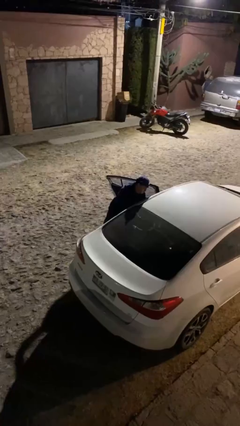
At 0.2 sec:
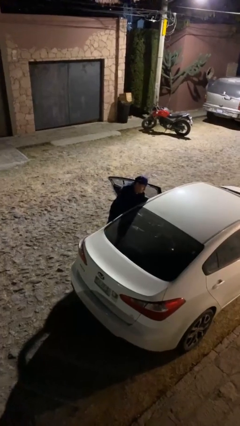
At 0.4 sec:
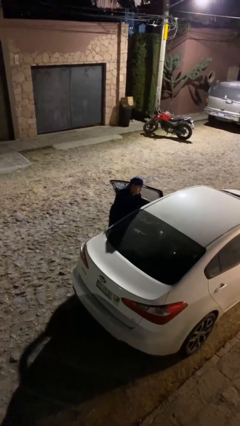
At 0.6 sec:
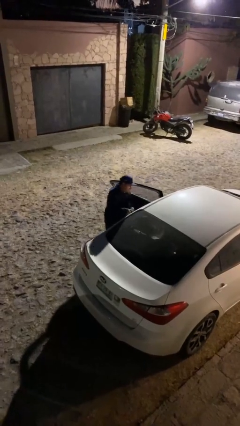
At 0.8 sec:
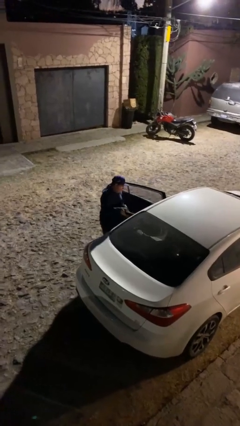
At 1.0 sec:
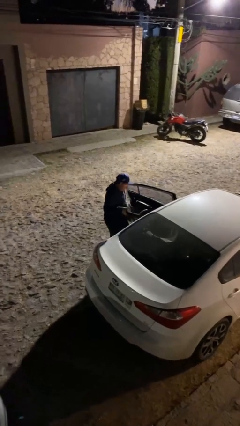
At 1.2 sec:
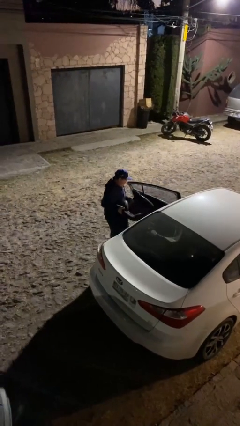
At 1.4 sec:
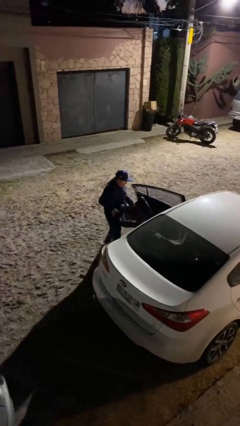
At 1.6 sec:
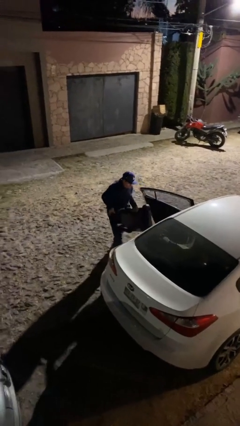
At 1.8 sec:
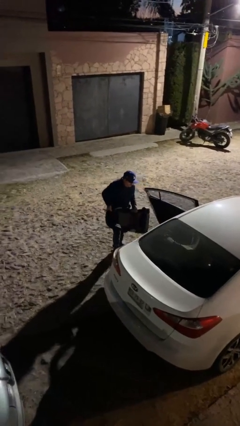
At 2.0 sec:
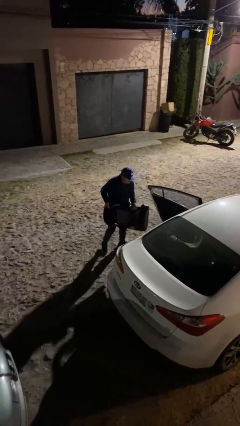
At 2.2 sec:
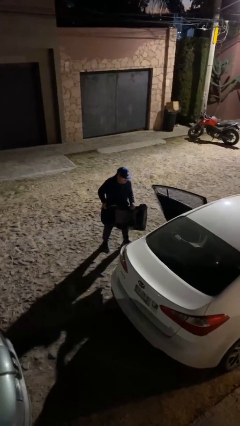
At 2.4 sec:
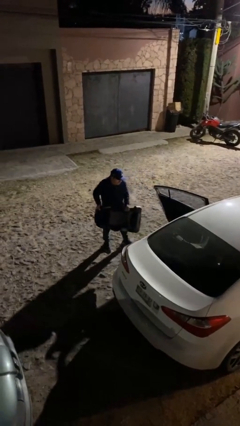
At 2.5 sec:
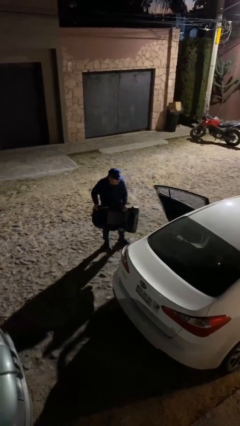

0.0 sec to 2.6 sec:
person unloads car

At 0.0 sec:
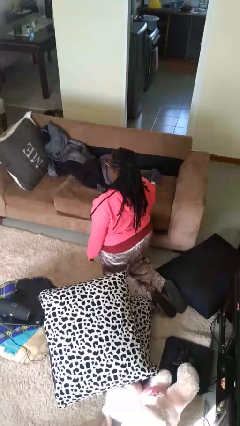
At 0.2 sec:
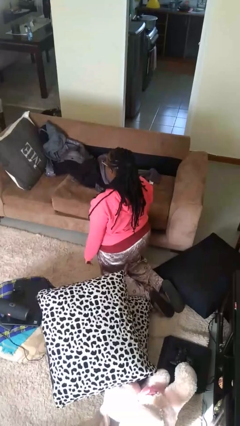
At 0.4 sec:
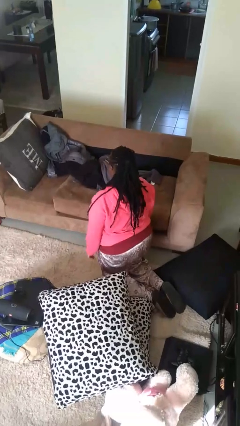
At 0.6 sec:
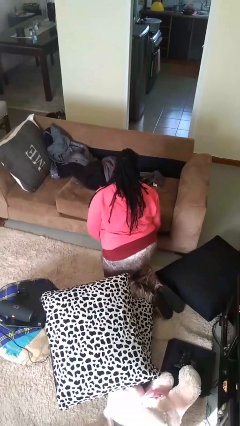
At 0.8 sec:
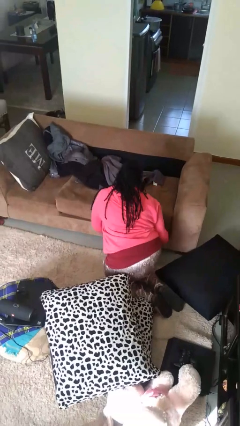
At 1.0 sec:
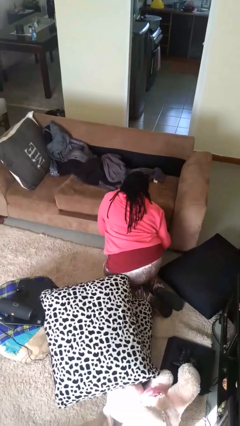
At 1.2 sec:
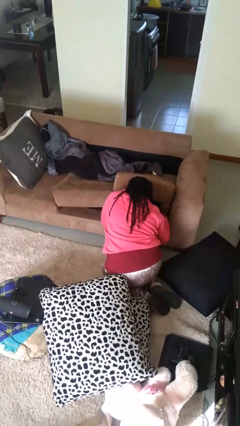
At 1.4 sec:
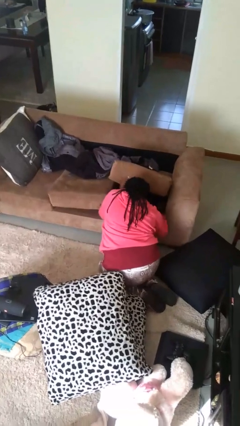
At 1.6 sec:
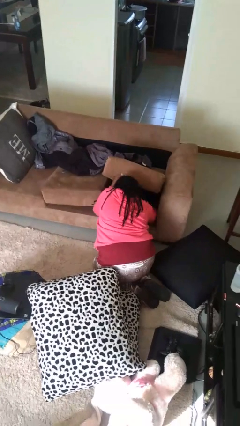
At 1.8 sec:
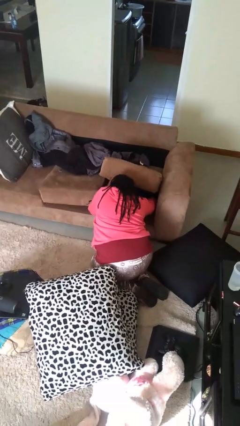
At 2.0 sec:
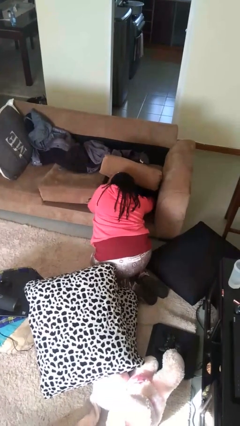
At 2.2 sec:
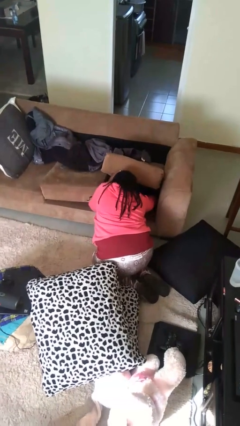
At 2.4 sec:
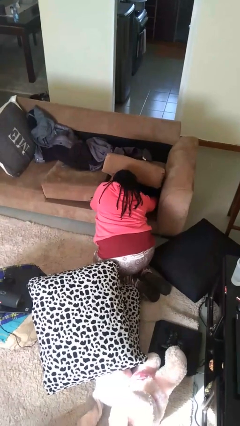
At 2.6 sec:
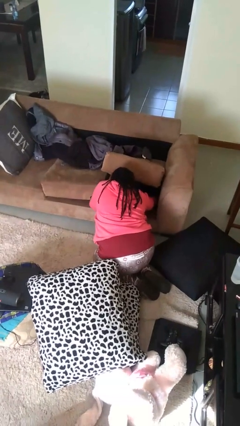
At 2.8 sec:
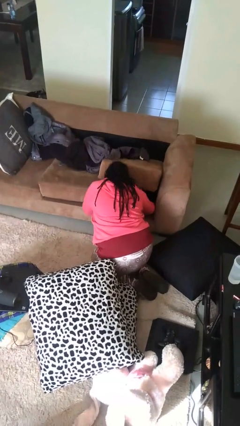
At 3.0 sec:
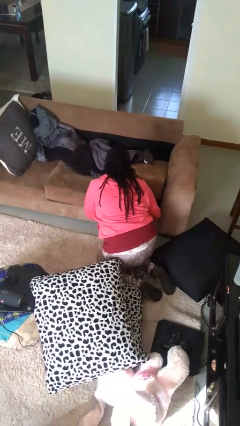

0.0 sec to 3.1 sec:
person searches under couch

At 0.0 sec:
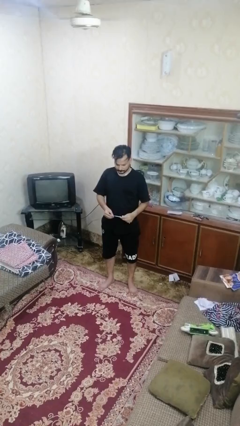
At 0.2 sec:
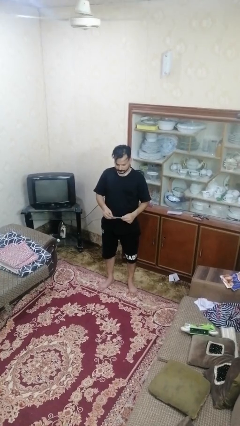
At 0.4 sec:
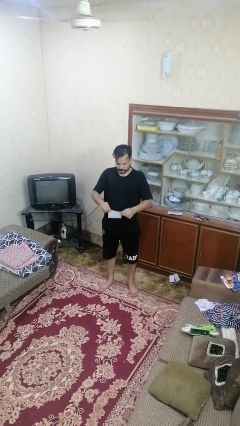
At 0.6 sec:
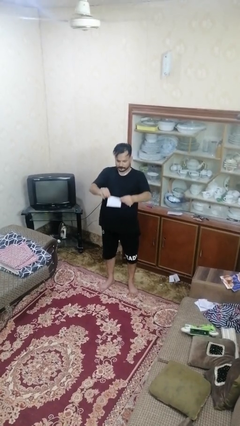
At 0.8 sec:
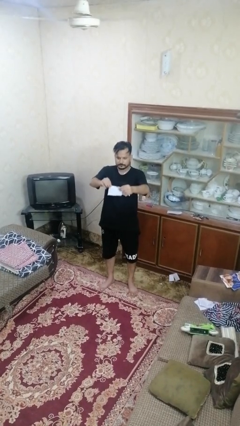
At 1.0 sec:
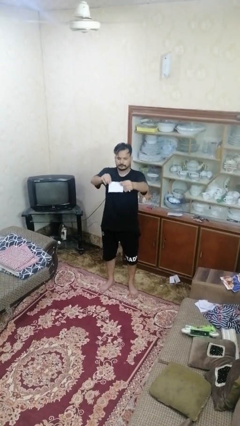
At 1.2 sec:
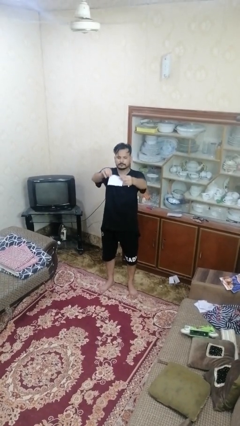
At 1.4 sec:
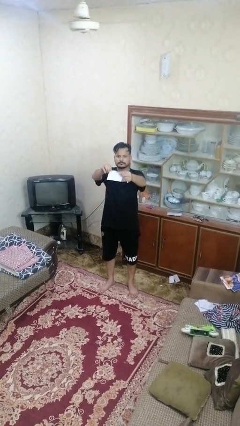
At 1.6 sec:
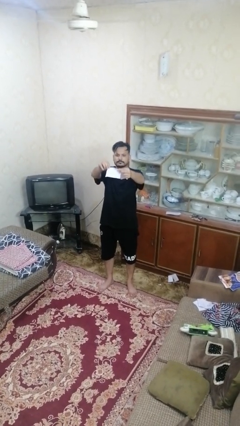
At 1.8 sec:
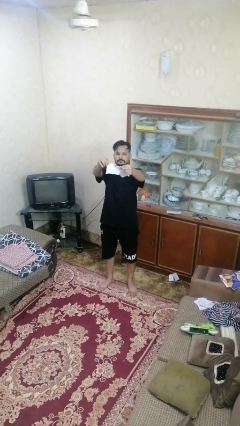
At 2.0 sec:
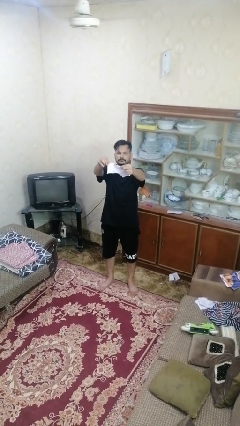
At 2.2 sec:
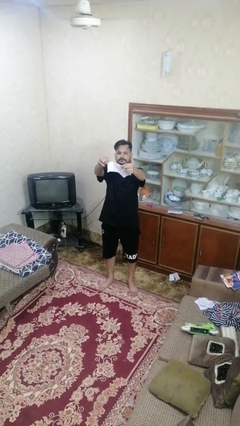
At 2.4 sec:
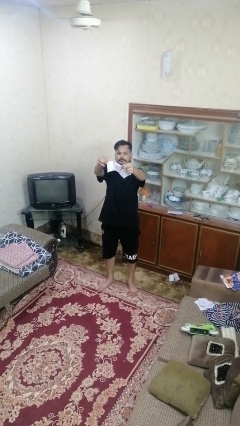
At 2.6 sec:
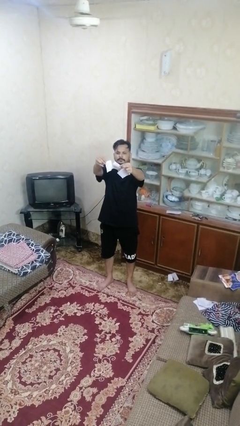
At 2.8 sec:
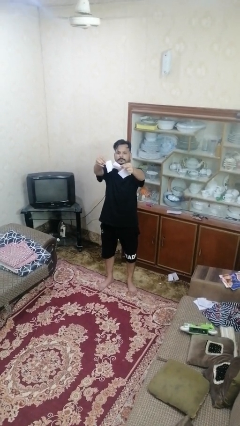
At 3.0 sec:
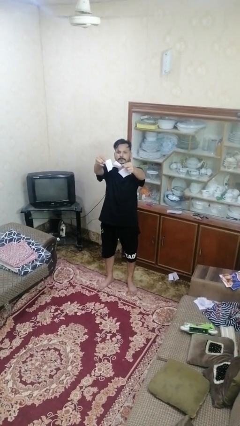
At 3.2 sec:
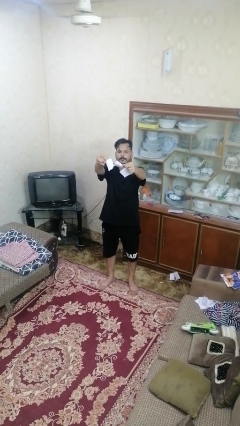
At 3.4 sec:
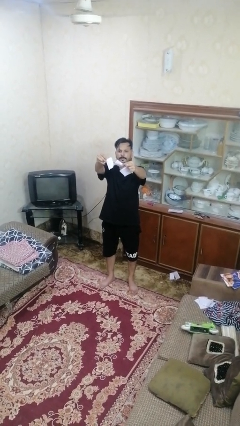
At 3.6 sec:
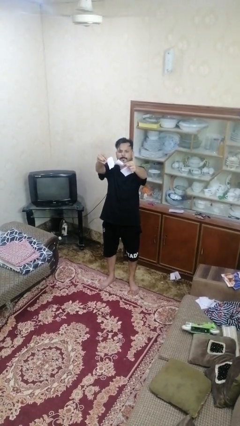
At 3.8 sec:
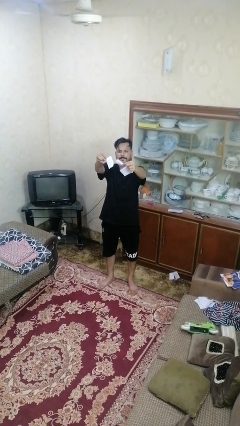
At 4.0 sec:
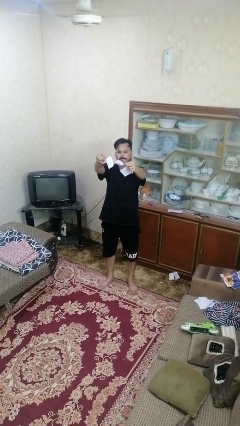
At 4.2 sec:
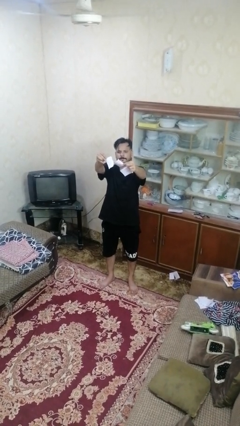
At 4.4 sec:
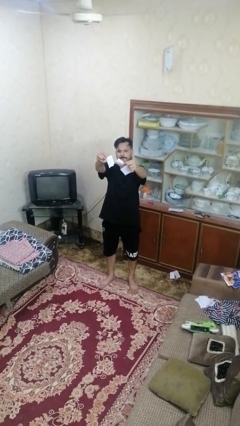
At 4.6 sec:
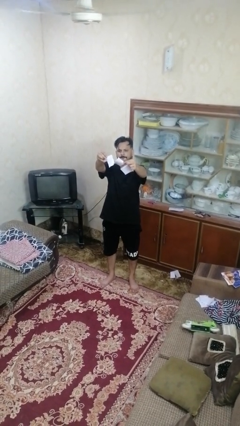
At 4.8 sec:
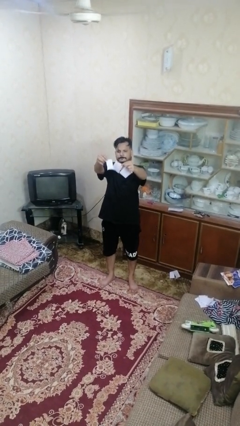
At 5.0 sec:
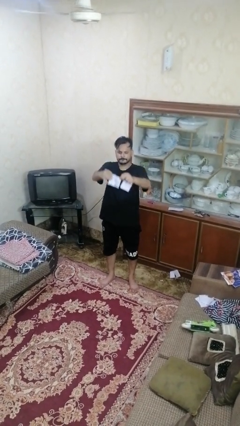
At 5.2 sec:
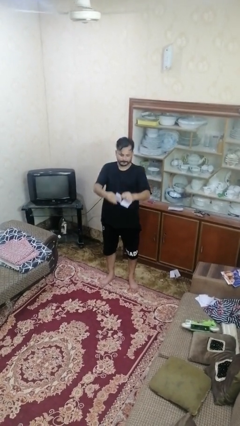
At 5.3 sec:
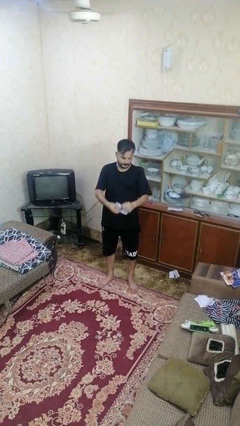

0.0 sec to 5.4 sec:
person tears paper

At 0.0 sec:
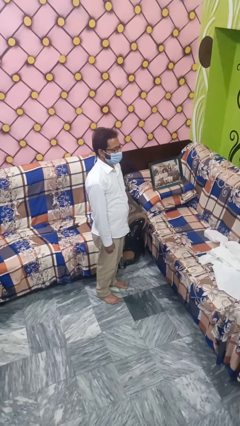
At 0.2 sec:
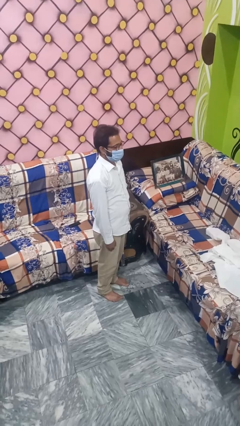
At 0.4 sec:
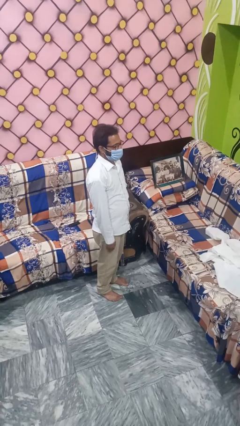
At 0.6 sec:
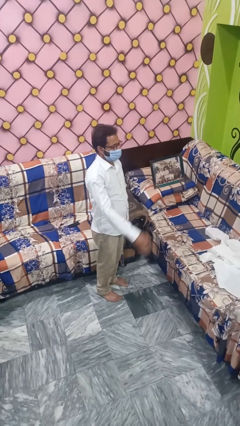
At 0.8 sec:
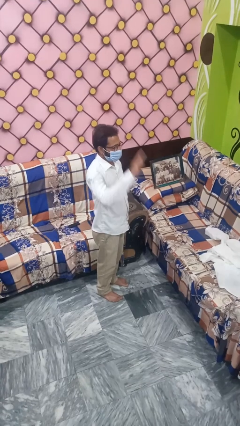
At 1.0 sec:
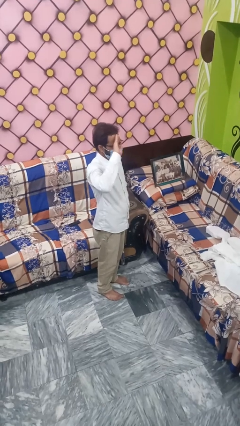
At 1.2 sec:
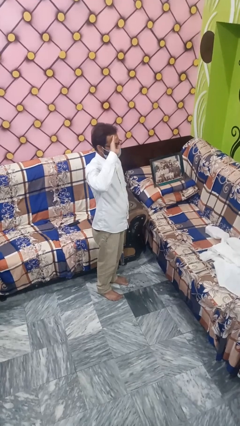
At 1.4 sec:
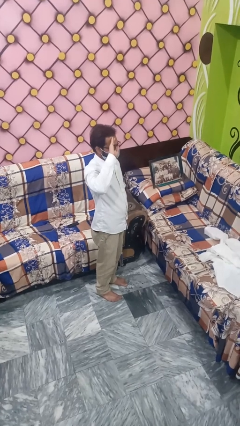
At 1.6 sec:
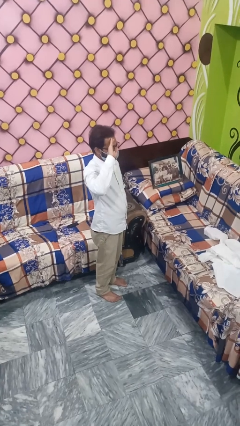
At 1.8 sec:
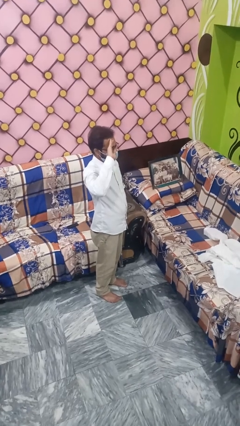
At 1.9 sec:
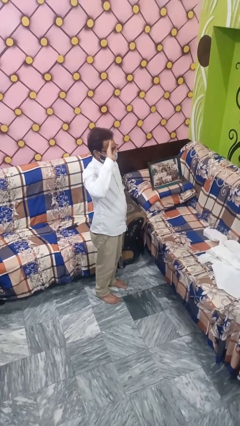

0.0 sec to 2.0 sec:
person salutes

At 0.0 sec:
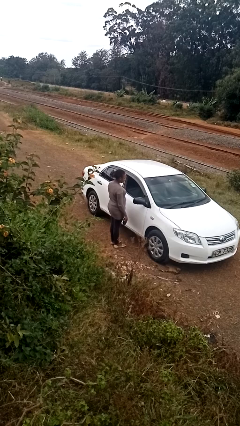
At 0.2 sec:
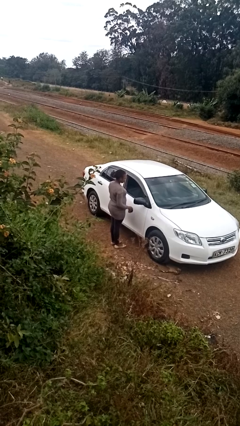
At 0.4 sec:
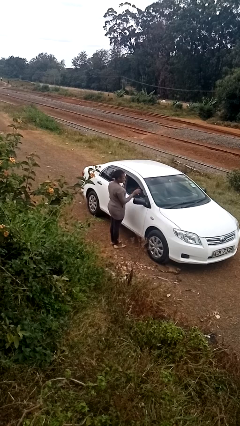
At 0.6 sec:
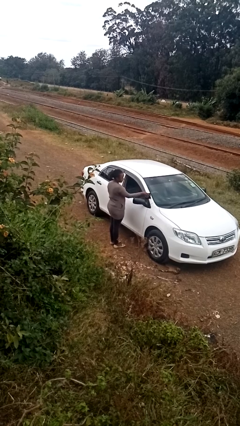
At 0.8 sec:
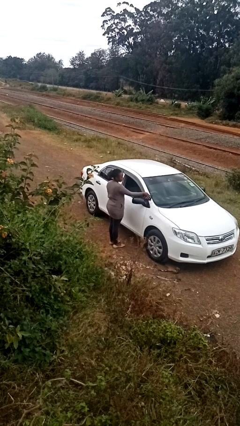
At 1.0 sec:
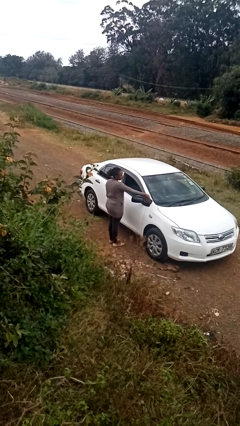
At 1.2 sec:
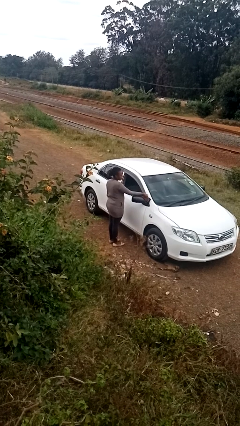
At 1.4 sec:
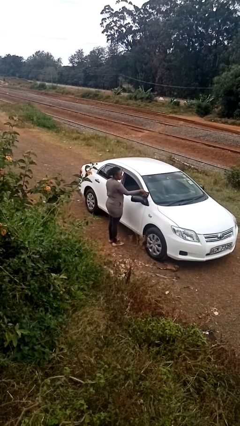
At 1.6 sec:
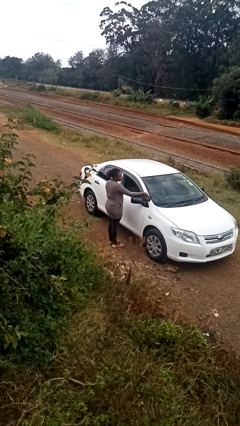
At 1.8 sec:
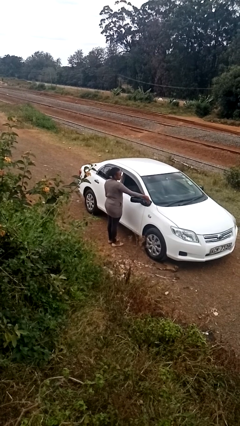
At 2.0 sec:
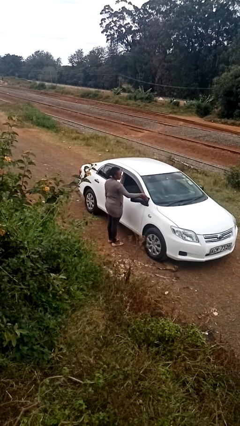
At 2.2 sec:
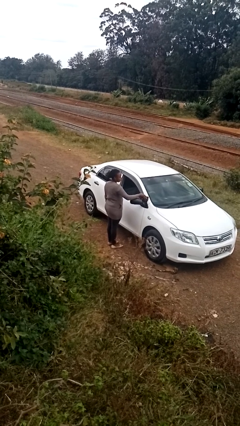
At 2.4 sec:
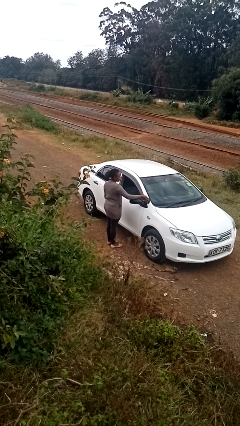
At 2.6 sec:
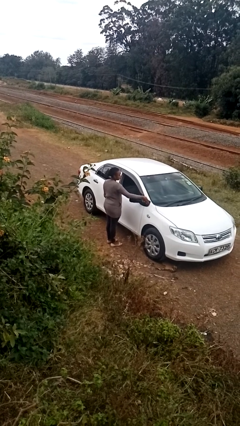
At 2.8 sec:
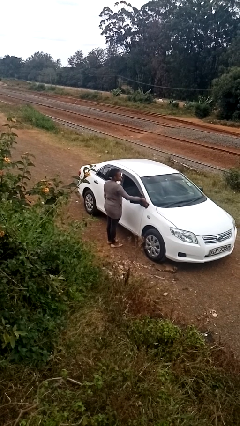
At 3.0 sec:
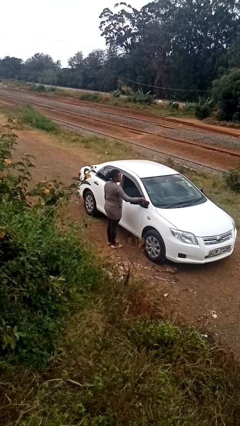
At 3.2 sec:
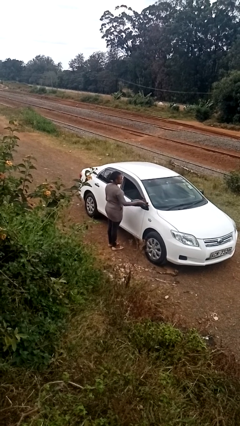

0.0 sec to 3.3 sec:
person polishes car with rag

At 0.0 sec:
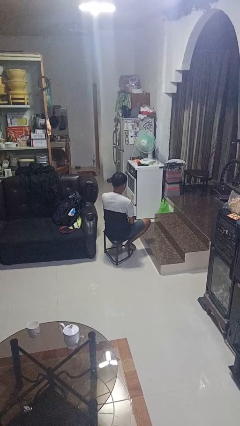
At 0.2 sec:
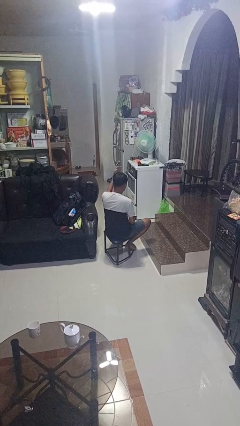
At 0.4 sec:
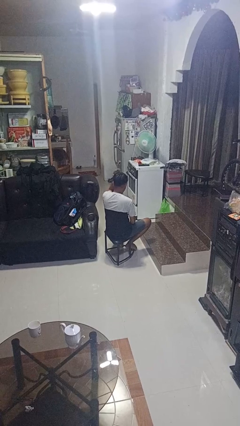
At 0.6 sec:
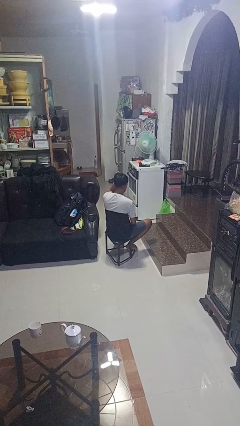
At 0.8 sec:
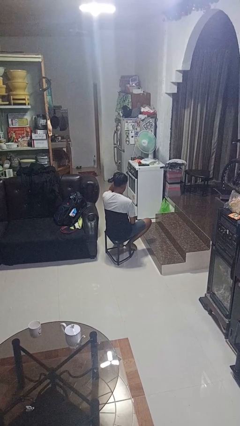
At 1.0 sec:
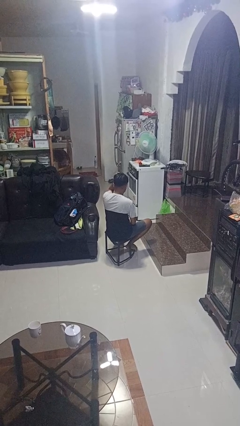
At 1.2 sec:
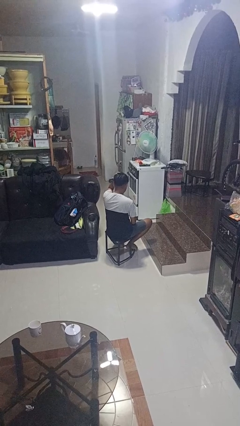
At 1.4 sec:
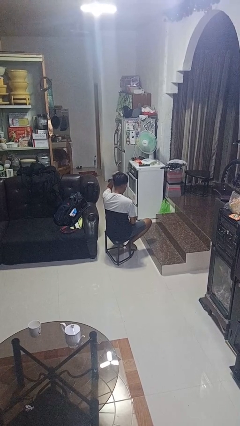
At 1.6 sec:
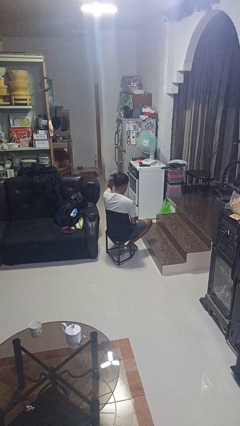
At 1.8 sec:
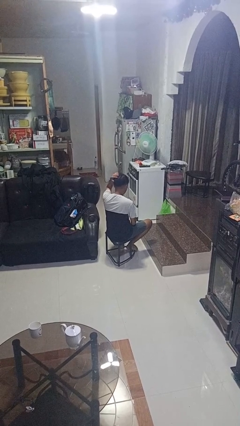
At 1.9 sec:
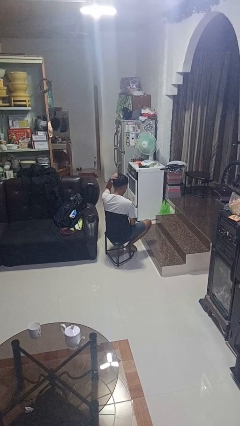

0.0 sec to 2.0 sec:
person pats head
